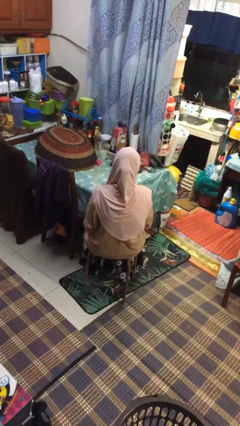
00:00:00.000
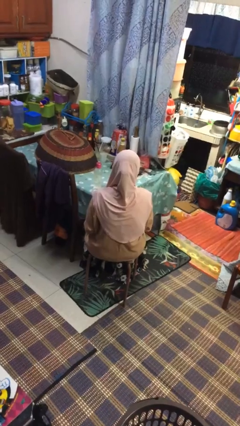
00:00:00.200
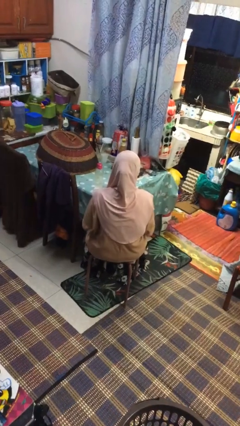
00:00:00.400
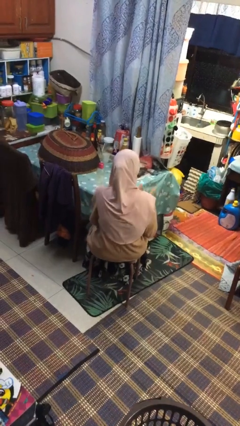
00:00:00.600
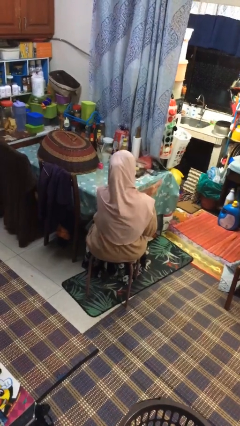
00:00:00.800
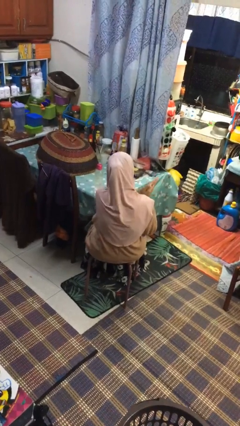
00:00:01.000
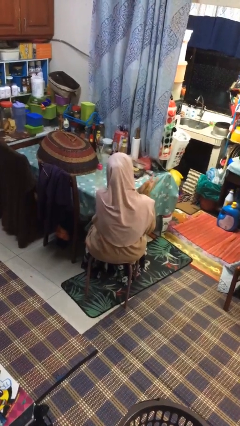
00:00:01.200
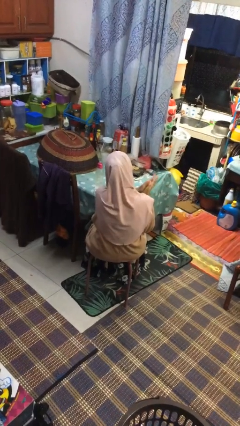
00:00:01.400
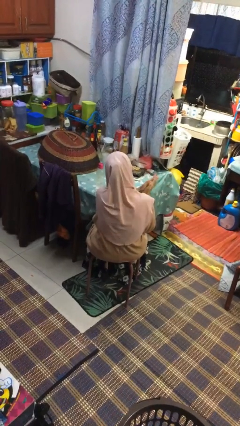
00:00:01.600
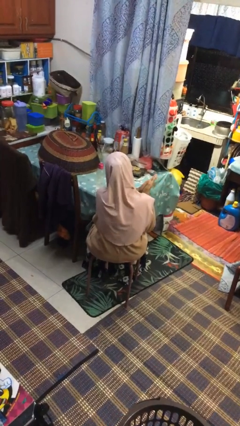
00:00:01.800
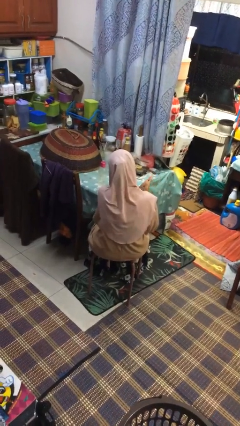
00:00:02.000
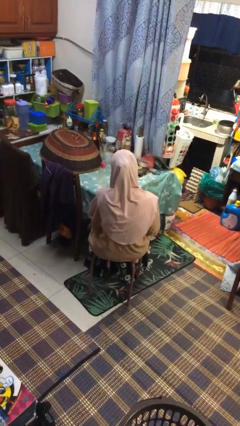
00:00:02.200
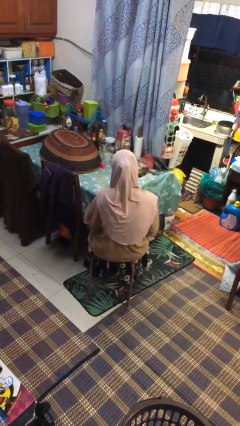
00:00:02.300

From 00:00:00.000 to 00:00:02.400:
person claps hands

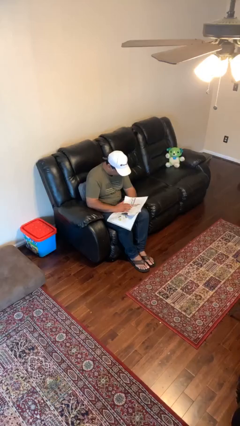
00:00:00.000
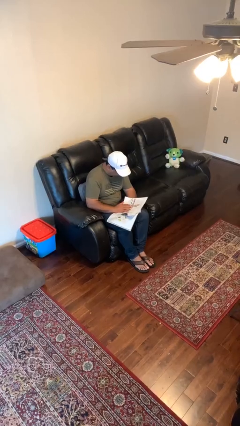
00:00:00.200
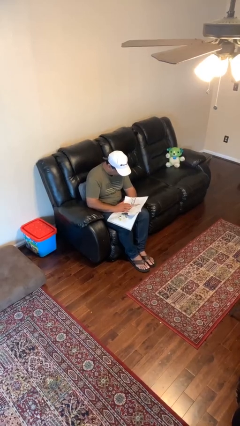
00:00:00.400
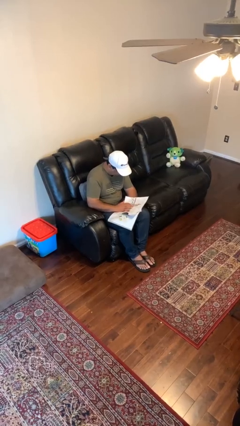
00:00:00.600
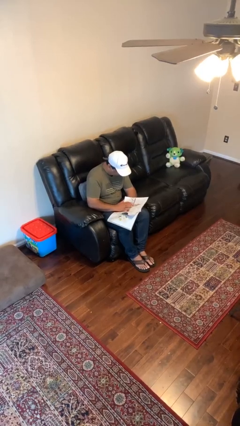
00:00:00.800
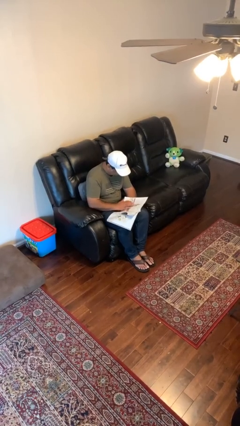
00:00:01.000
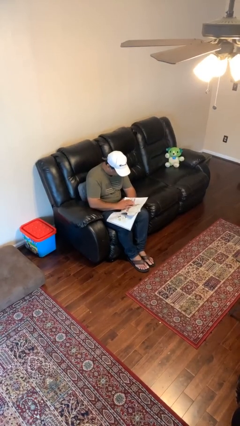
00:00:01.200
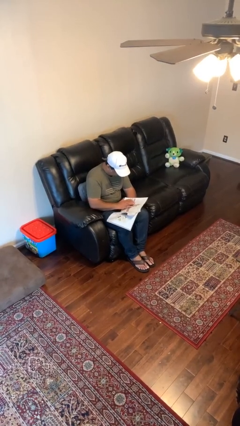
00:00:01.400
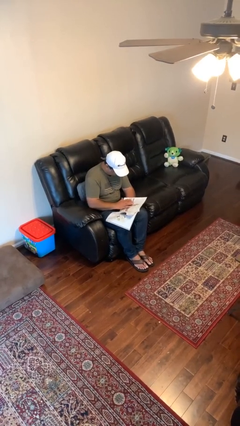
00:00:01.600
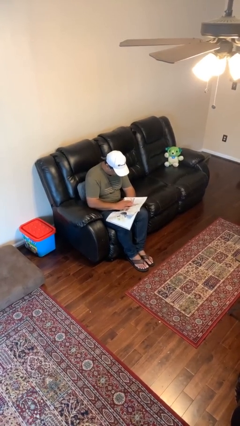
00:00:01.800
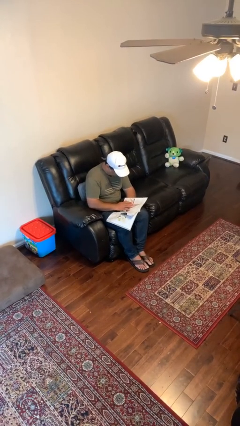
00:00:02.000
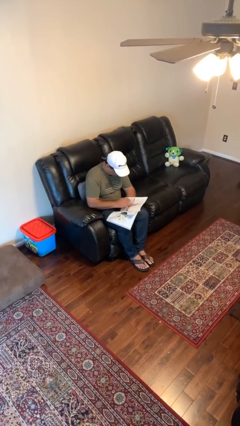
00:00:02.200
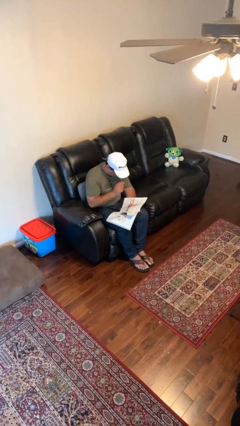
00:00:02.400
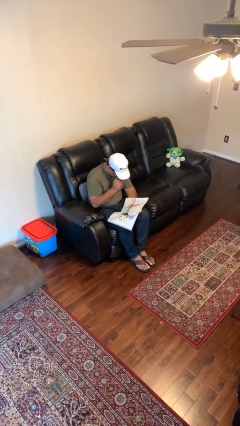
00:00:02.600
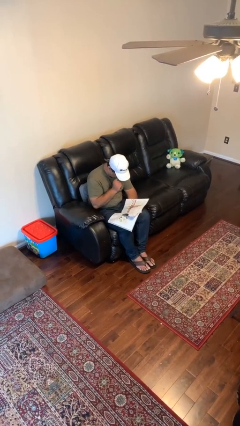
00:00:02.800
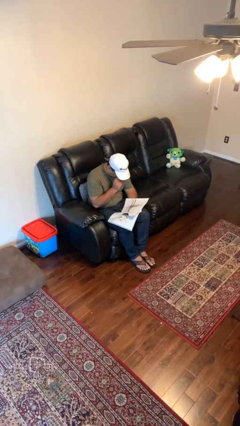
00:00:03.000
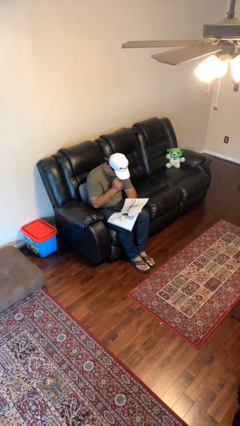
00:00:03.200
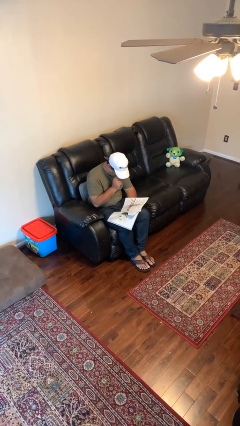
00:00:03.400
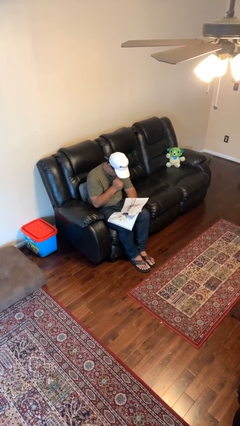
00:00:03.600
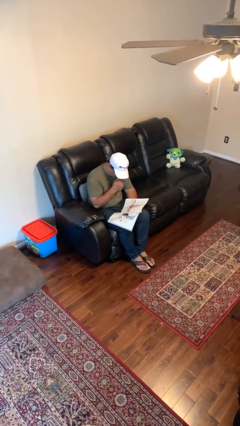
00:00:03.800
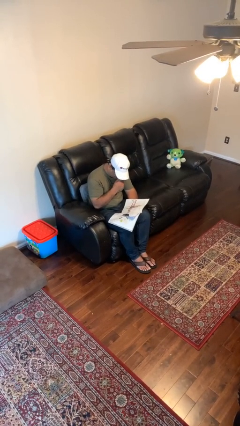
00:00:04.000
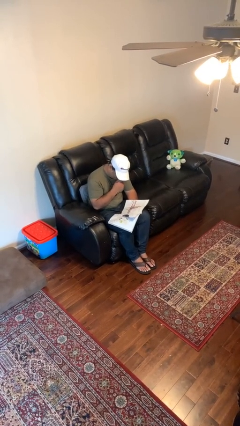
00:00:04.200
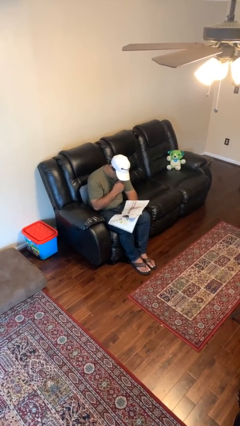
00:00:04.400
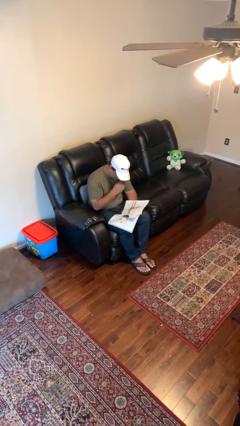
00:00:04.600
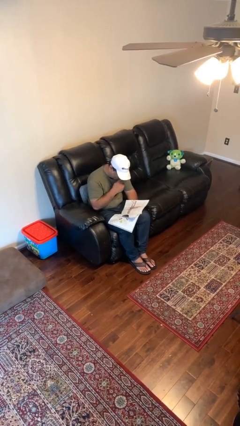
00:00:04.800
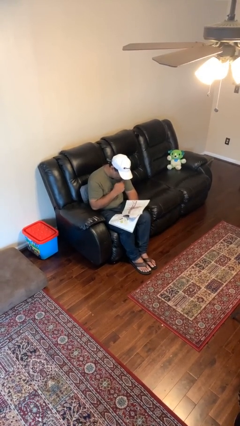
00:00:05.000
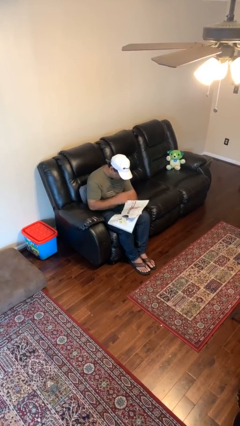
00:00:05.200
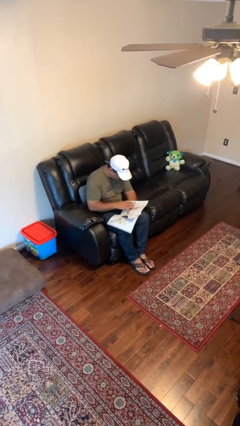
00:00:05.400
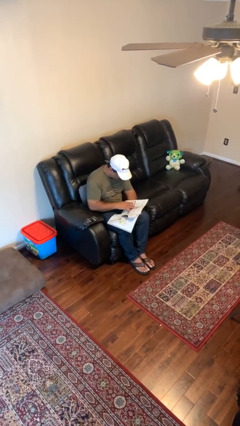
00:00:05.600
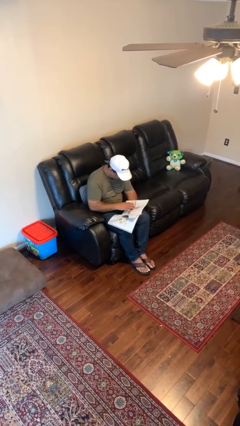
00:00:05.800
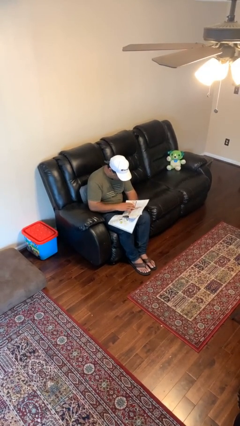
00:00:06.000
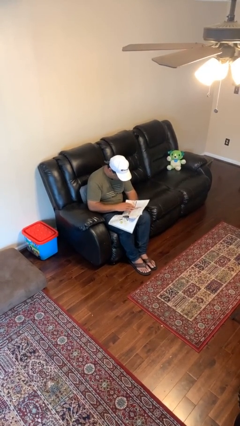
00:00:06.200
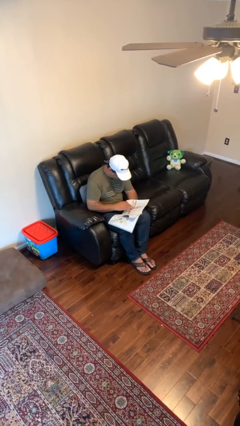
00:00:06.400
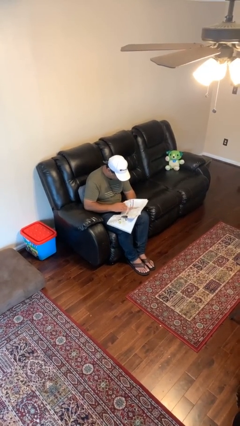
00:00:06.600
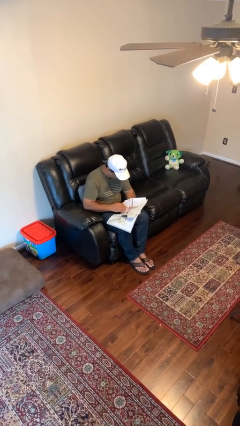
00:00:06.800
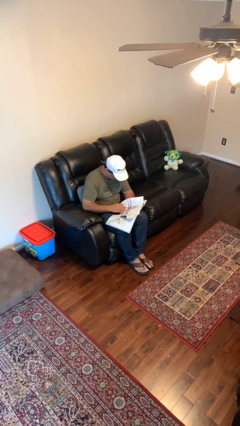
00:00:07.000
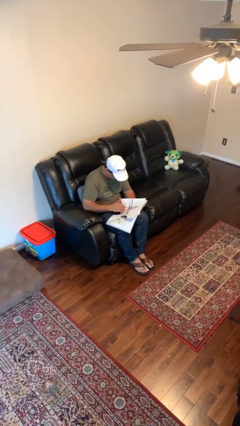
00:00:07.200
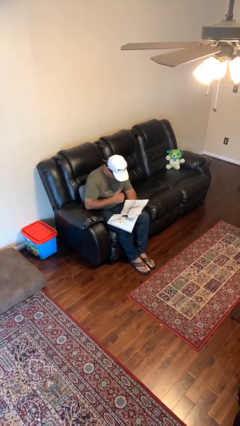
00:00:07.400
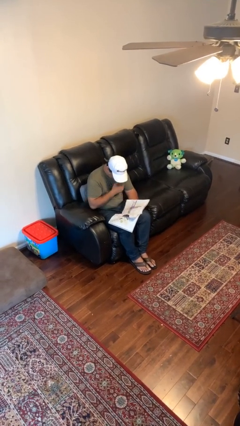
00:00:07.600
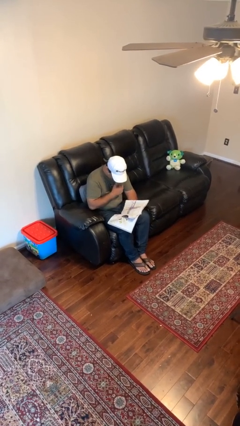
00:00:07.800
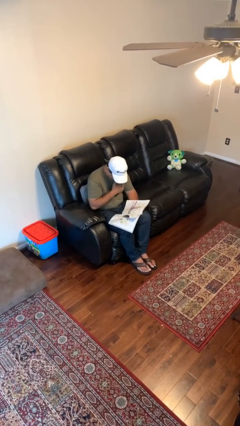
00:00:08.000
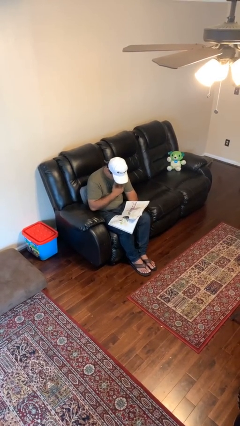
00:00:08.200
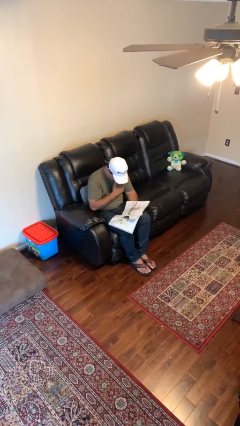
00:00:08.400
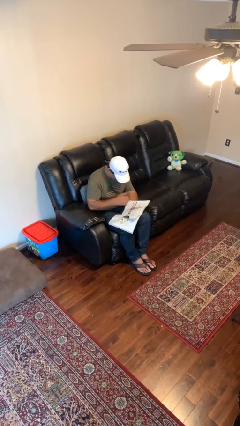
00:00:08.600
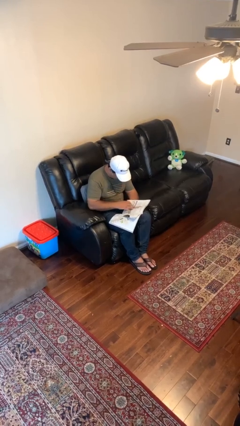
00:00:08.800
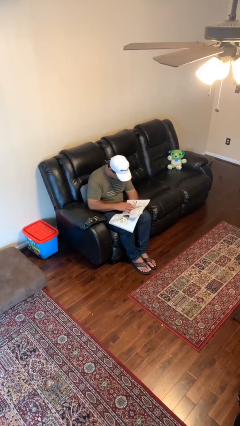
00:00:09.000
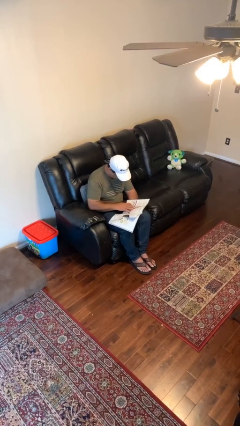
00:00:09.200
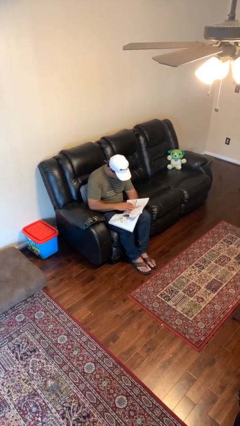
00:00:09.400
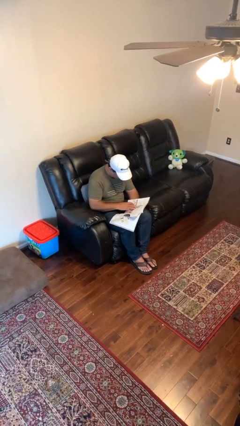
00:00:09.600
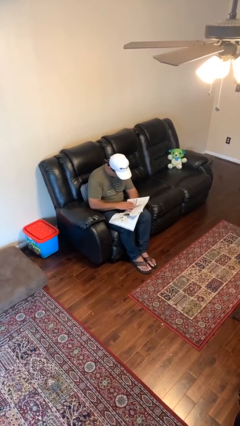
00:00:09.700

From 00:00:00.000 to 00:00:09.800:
person reads document

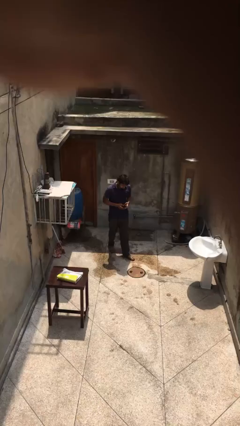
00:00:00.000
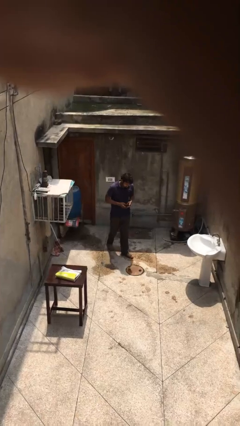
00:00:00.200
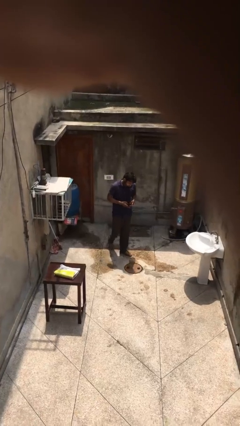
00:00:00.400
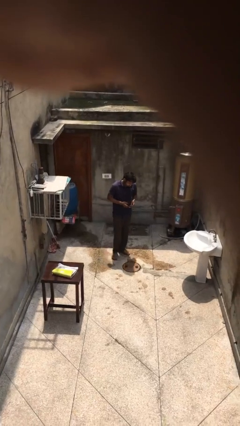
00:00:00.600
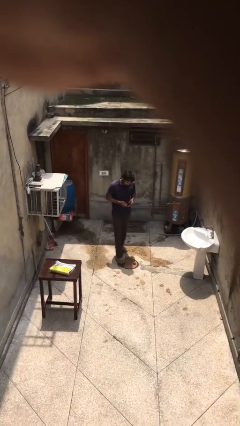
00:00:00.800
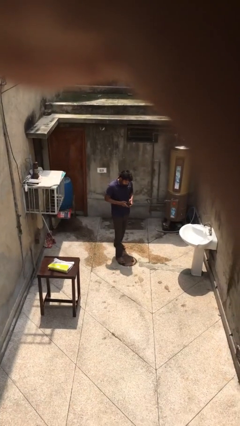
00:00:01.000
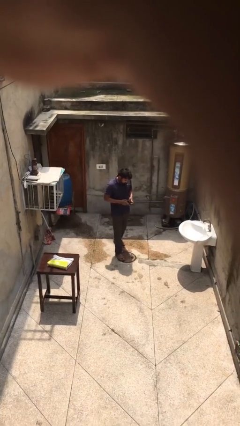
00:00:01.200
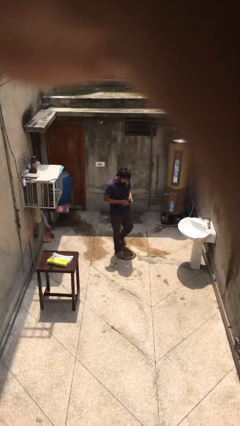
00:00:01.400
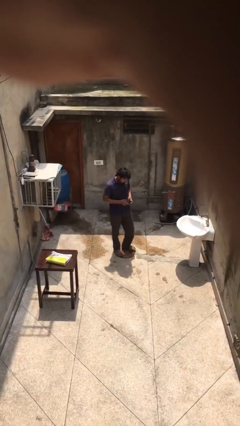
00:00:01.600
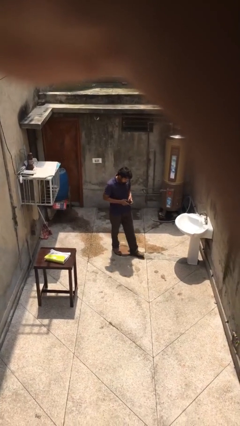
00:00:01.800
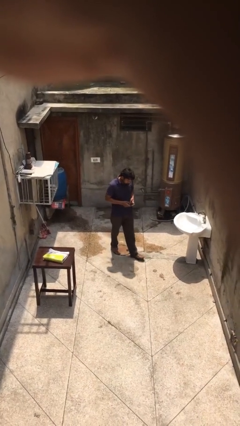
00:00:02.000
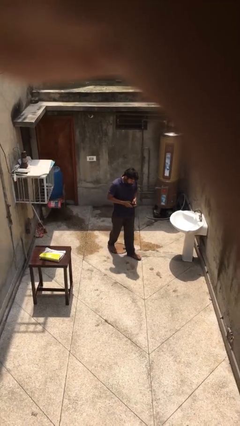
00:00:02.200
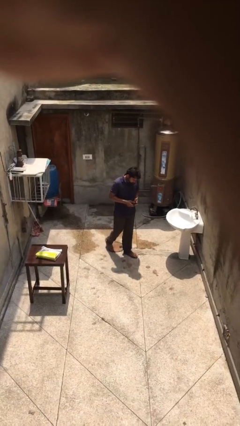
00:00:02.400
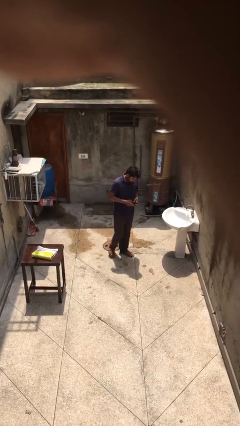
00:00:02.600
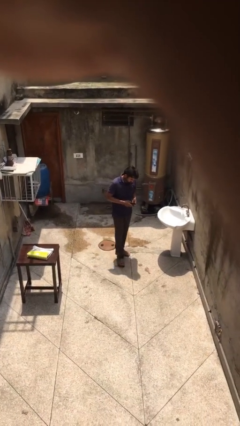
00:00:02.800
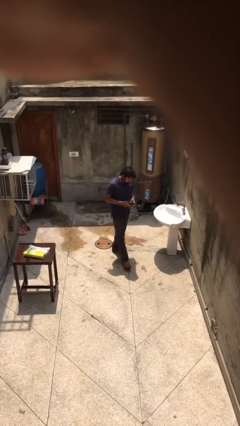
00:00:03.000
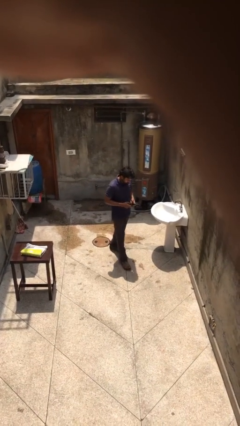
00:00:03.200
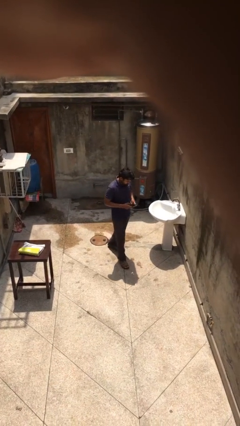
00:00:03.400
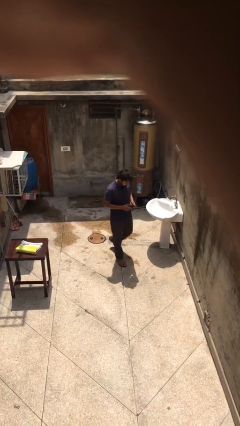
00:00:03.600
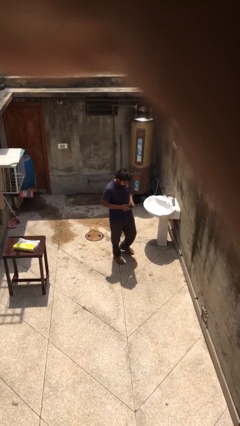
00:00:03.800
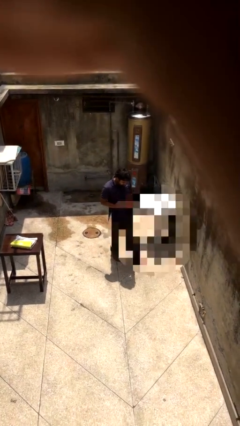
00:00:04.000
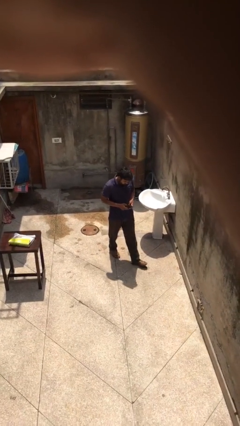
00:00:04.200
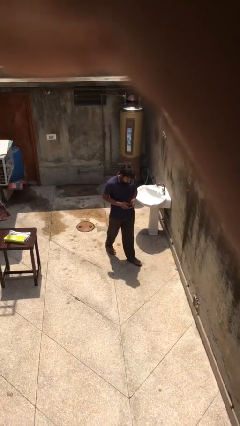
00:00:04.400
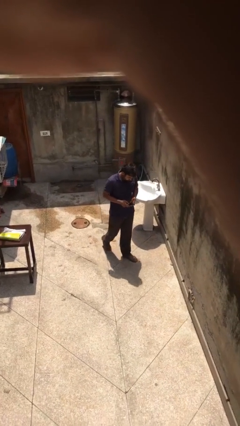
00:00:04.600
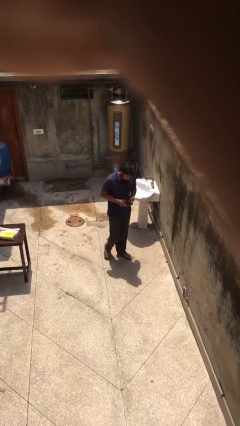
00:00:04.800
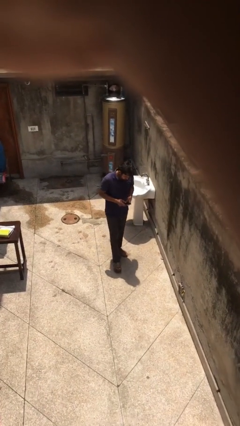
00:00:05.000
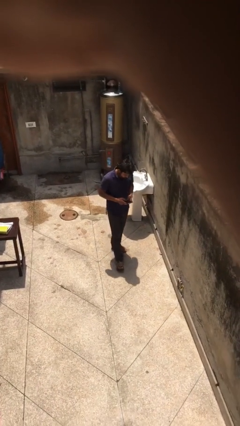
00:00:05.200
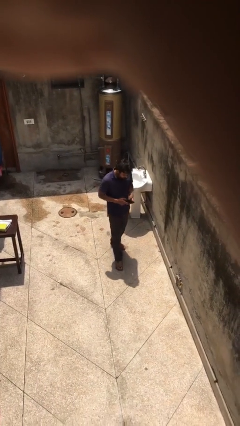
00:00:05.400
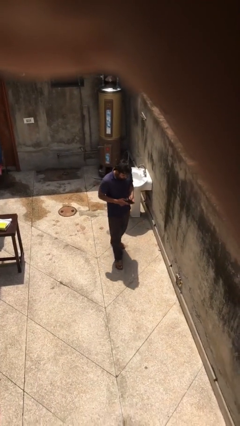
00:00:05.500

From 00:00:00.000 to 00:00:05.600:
person texts on phone

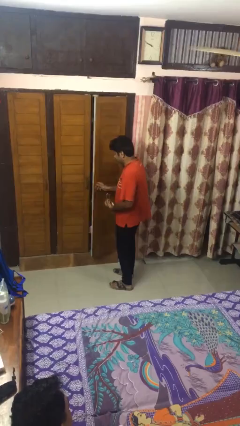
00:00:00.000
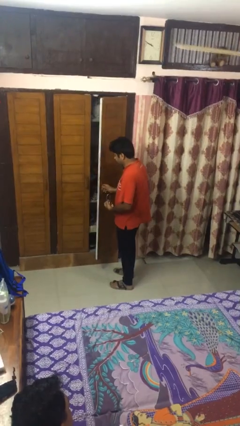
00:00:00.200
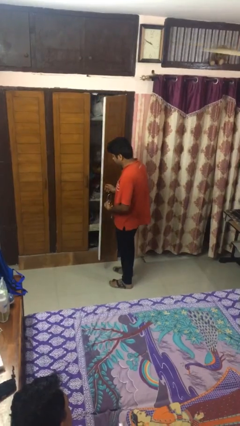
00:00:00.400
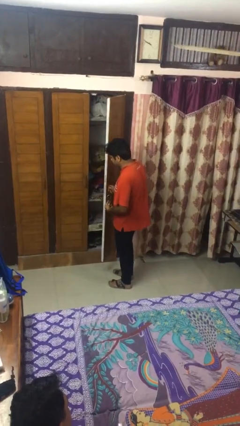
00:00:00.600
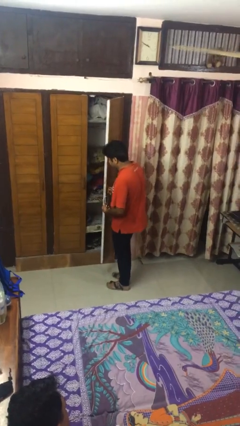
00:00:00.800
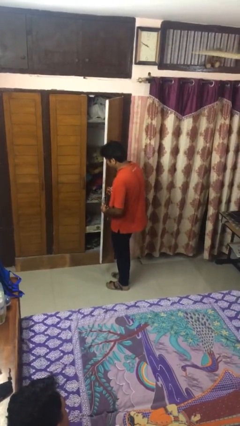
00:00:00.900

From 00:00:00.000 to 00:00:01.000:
person opens facility door
